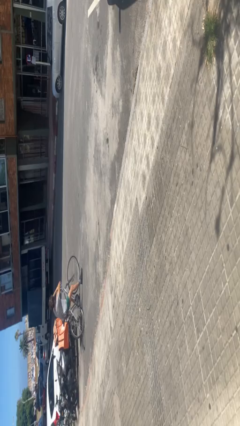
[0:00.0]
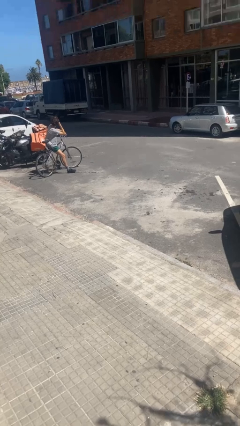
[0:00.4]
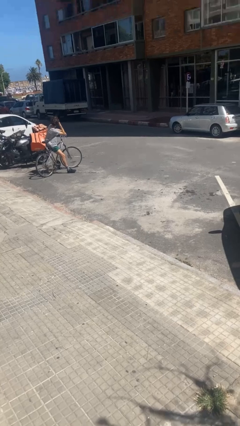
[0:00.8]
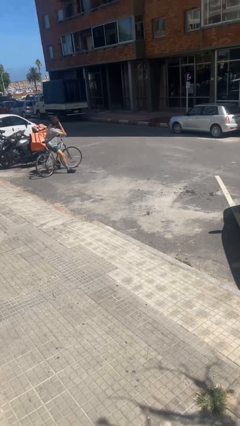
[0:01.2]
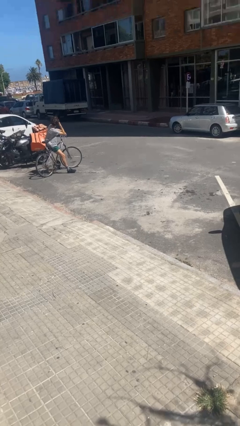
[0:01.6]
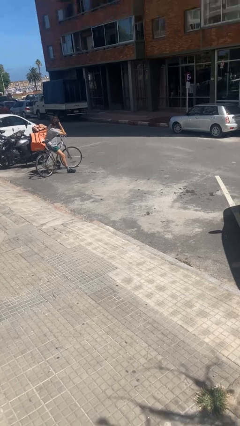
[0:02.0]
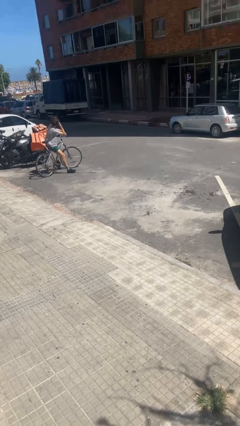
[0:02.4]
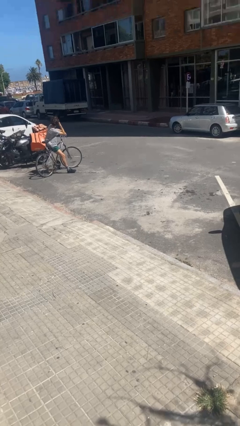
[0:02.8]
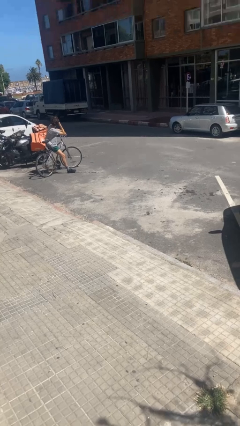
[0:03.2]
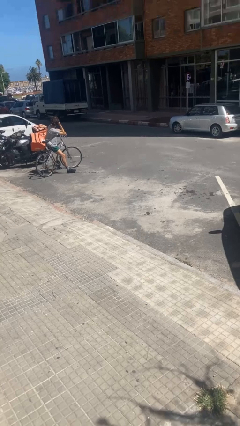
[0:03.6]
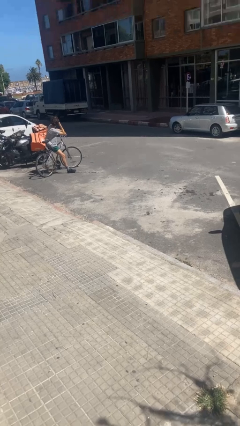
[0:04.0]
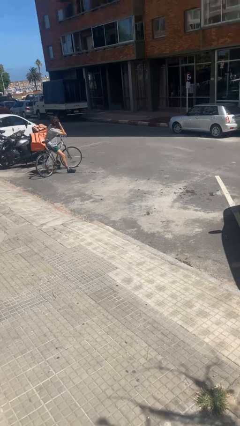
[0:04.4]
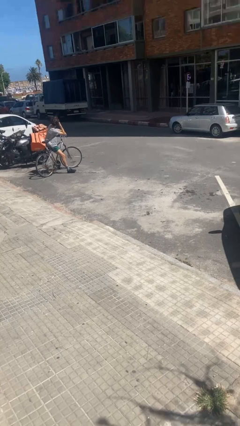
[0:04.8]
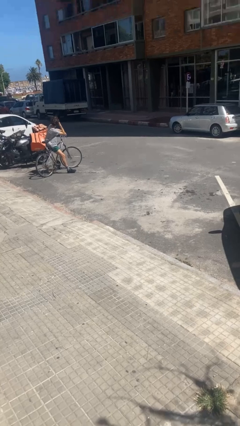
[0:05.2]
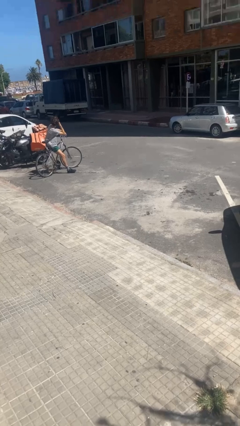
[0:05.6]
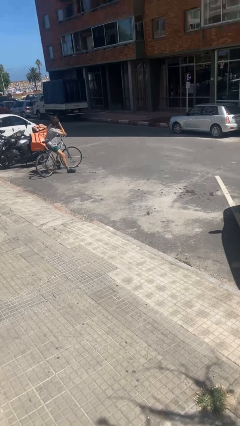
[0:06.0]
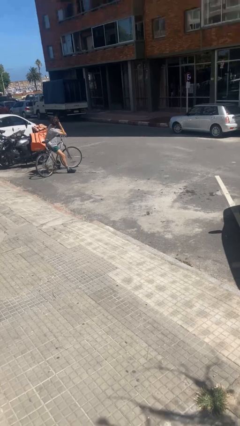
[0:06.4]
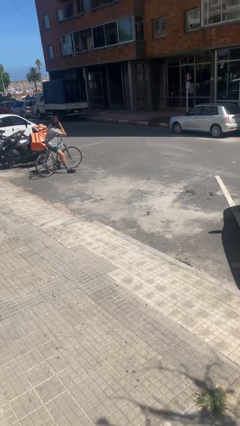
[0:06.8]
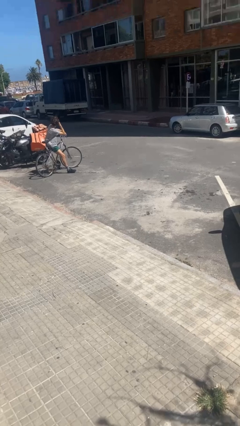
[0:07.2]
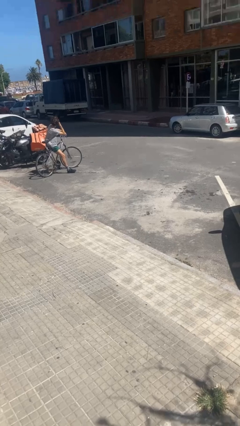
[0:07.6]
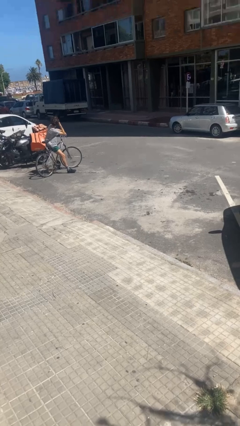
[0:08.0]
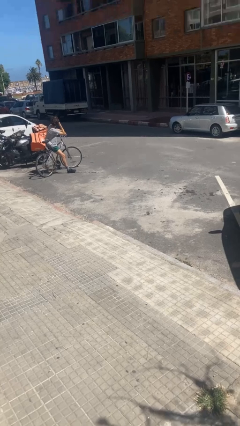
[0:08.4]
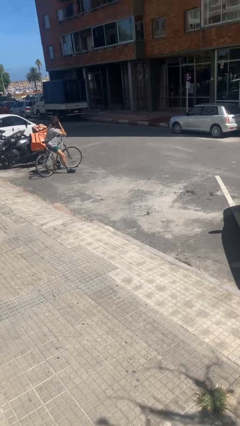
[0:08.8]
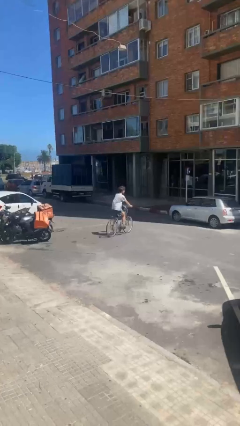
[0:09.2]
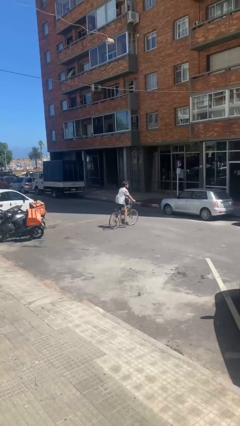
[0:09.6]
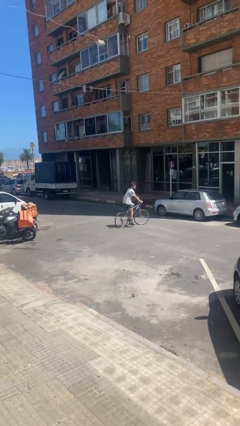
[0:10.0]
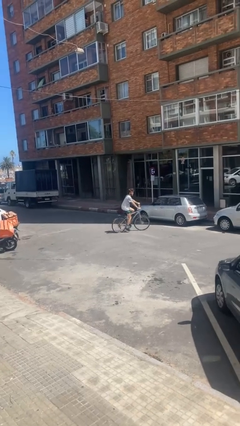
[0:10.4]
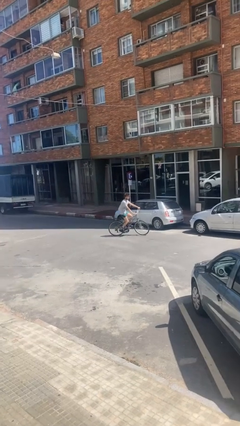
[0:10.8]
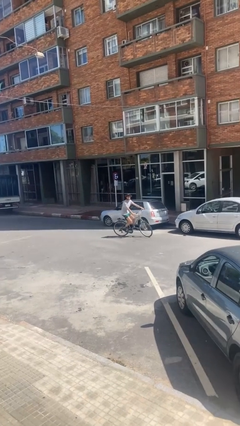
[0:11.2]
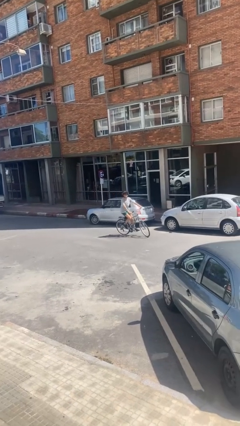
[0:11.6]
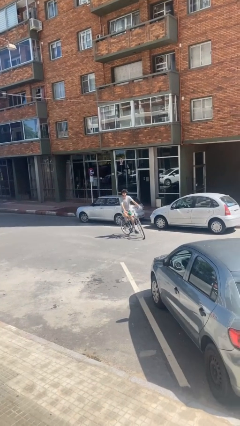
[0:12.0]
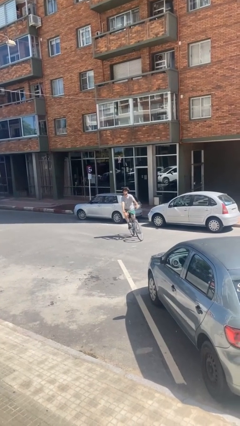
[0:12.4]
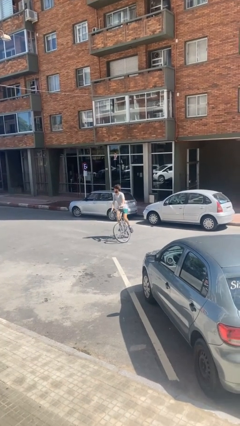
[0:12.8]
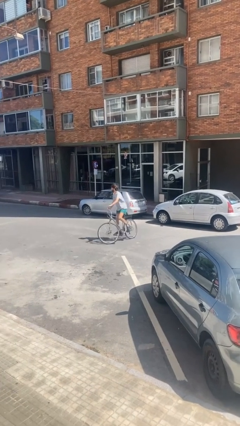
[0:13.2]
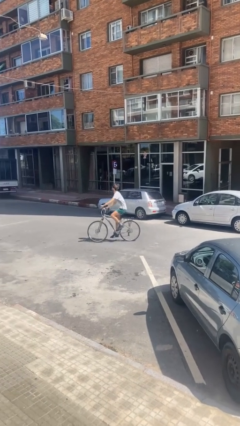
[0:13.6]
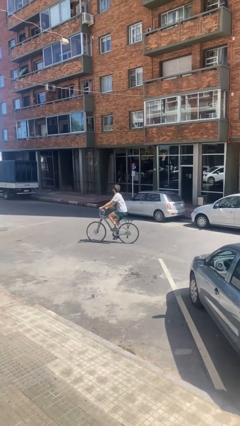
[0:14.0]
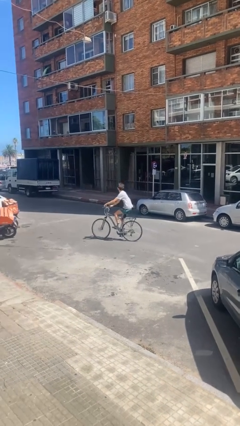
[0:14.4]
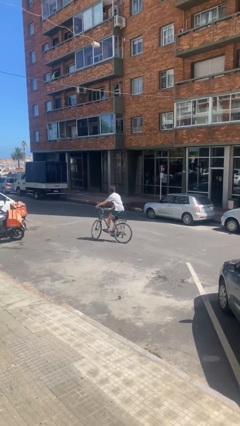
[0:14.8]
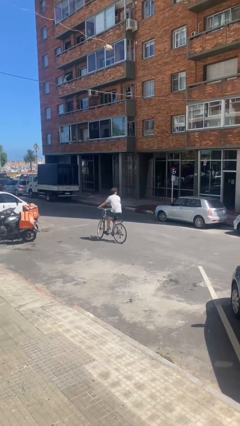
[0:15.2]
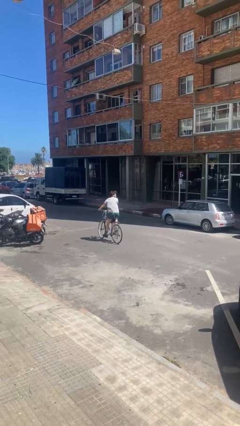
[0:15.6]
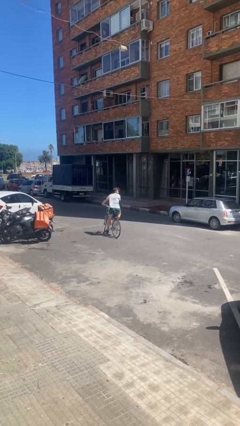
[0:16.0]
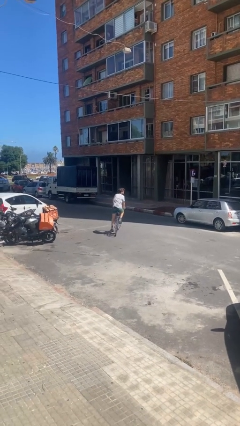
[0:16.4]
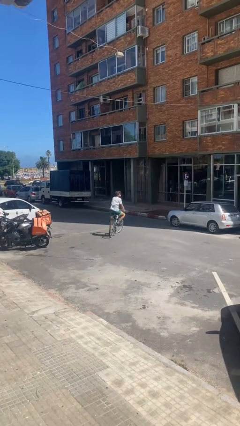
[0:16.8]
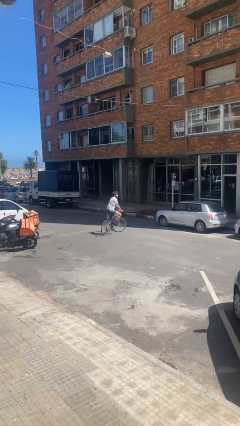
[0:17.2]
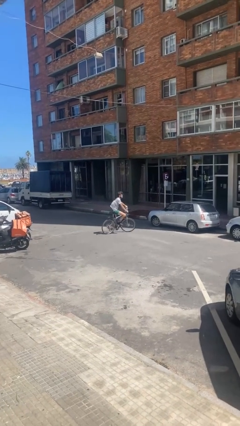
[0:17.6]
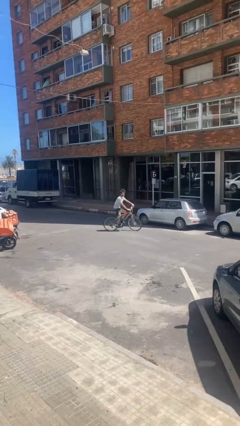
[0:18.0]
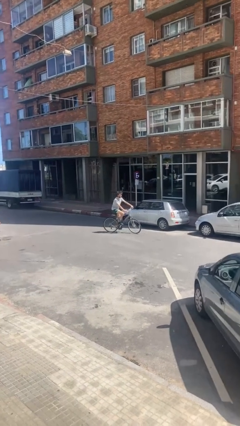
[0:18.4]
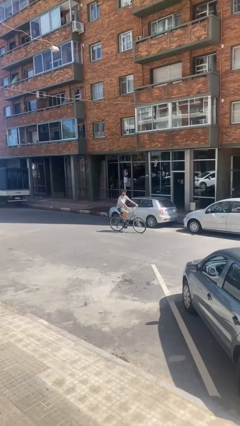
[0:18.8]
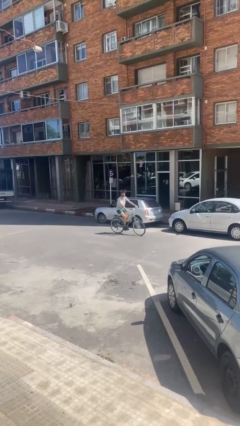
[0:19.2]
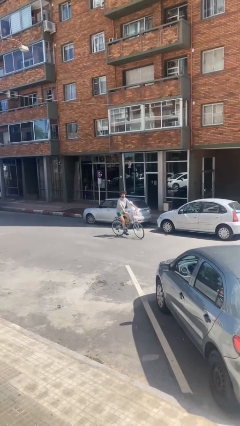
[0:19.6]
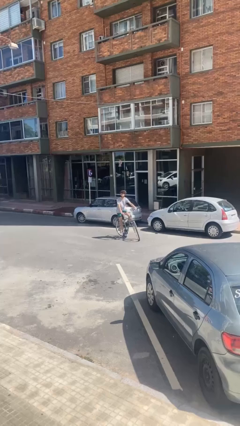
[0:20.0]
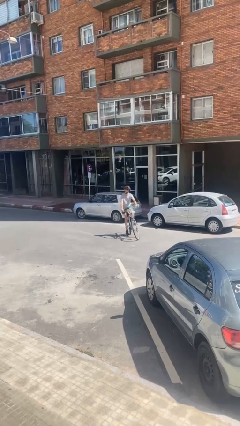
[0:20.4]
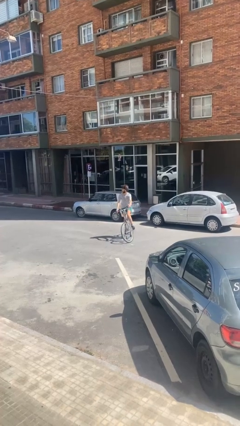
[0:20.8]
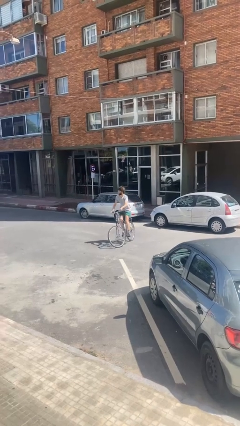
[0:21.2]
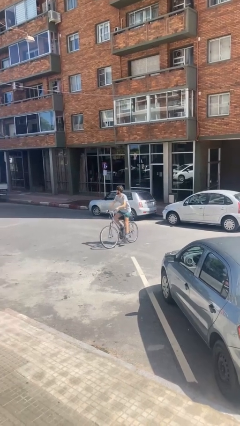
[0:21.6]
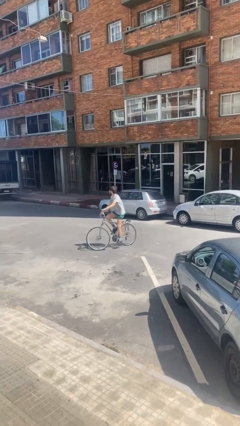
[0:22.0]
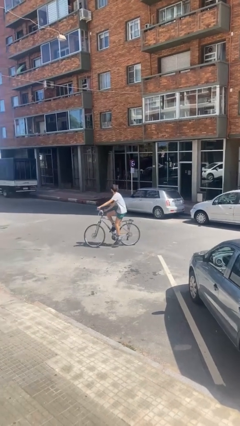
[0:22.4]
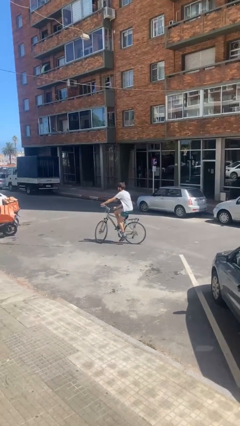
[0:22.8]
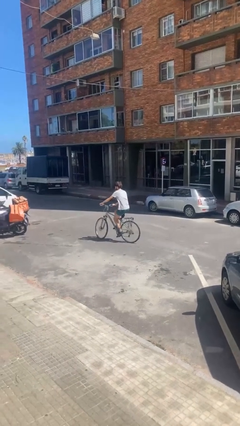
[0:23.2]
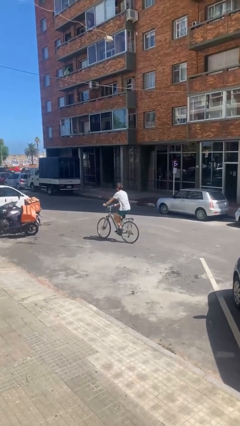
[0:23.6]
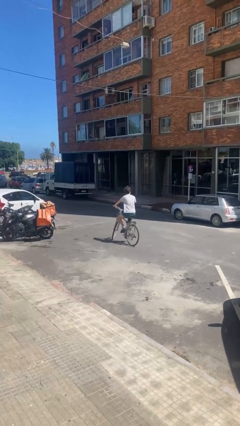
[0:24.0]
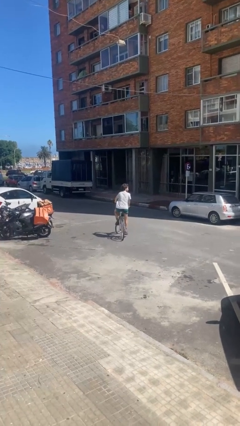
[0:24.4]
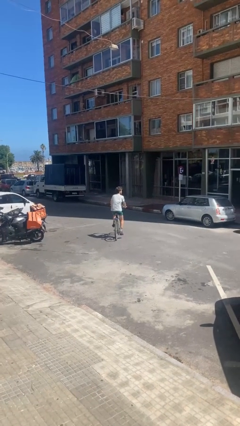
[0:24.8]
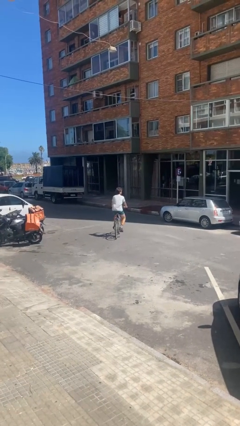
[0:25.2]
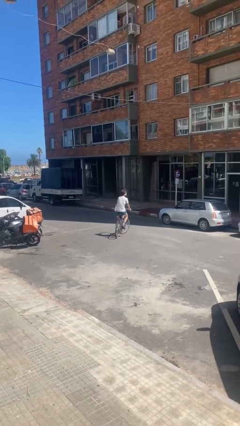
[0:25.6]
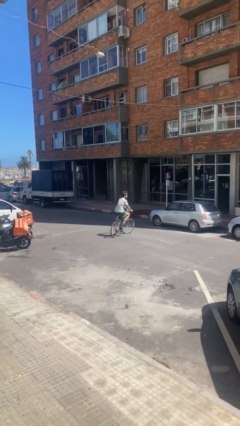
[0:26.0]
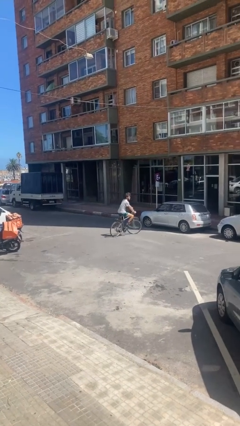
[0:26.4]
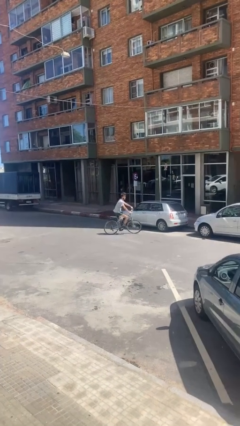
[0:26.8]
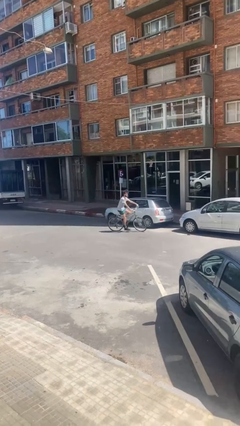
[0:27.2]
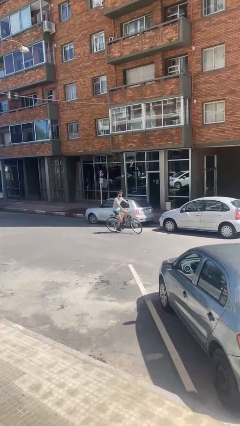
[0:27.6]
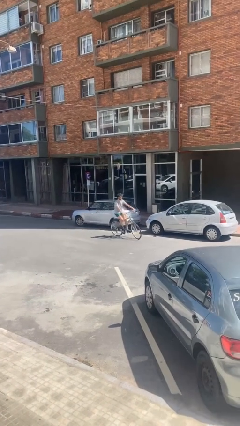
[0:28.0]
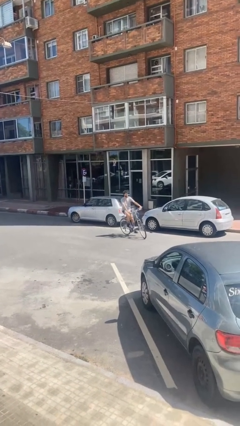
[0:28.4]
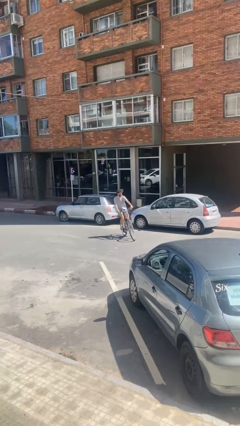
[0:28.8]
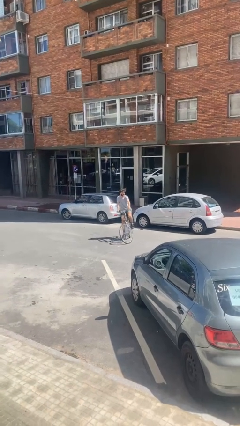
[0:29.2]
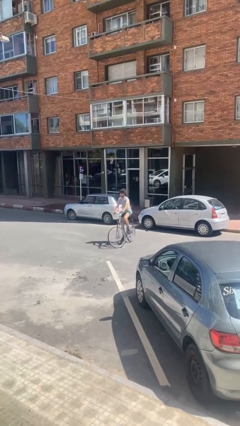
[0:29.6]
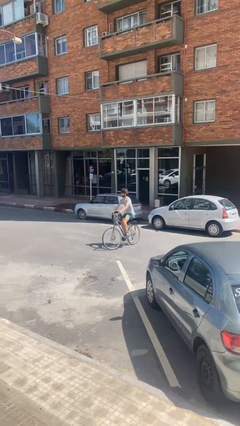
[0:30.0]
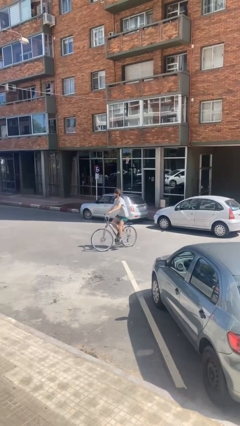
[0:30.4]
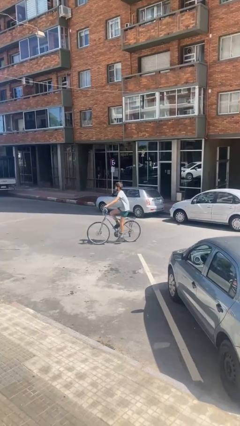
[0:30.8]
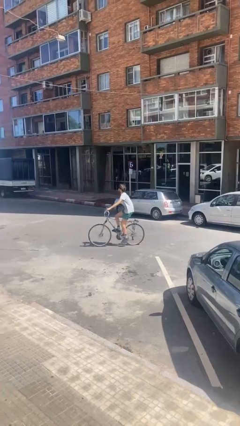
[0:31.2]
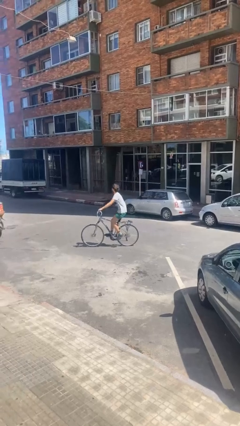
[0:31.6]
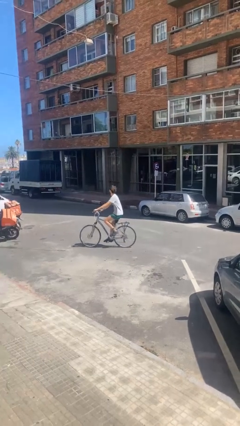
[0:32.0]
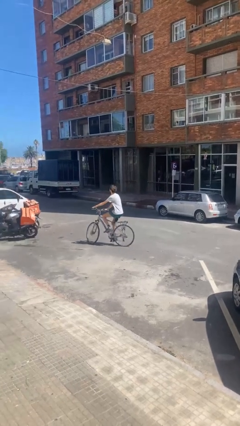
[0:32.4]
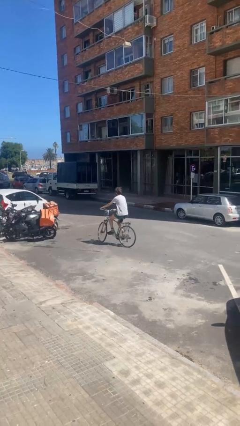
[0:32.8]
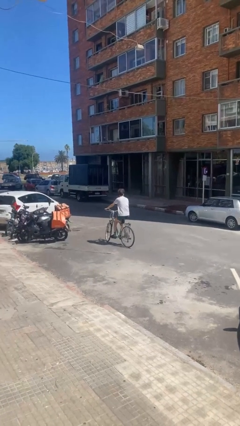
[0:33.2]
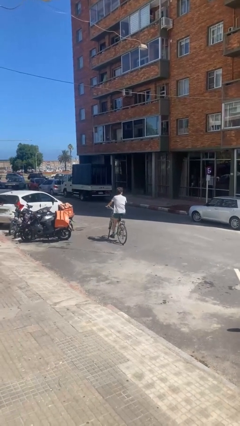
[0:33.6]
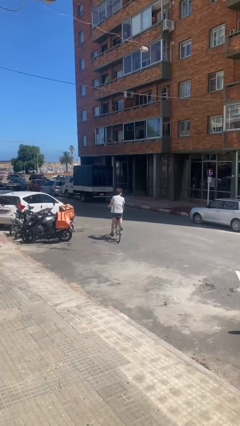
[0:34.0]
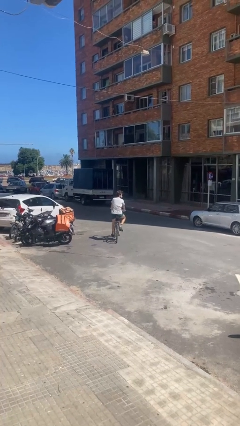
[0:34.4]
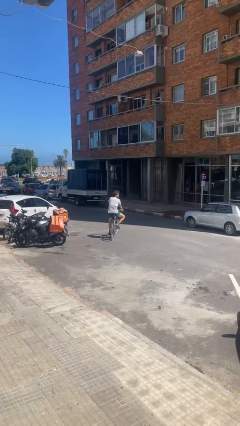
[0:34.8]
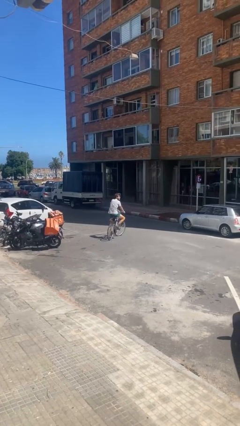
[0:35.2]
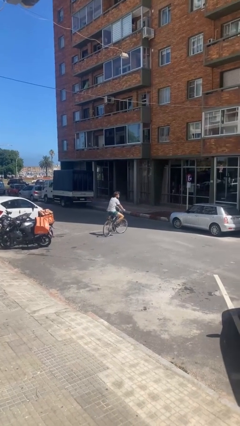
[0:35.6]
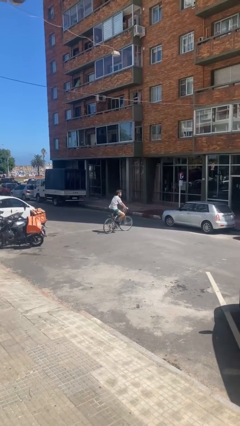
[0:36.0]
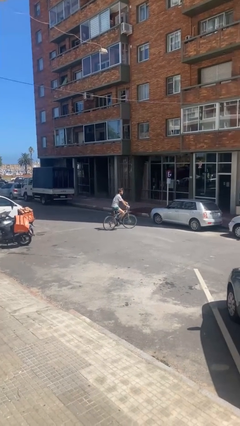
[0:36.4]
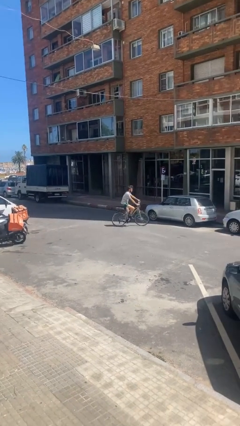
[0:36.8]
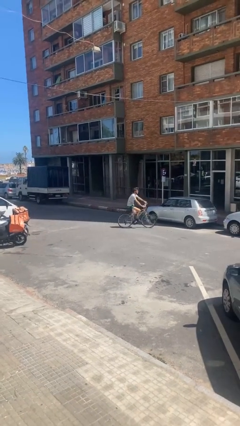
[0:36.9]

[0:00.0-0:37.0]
person rides bicycle
